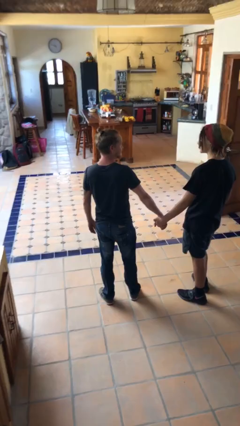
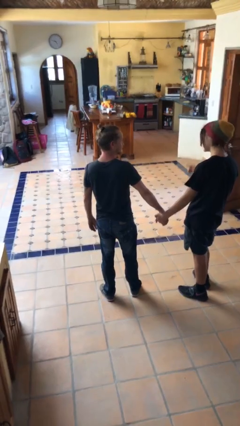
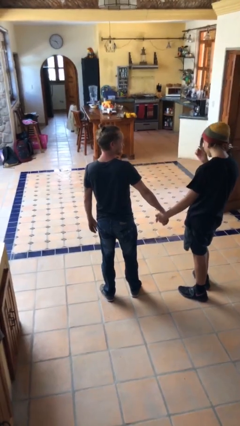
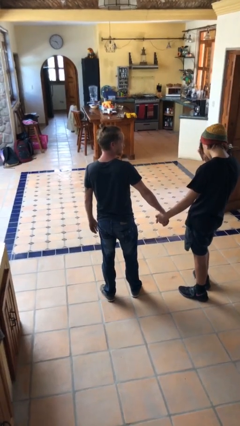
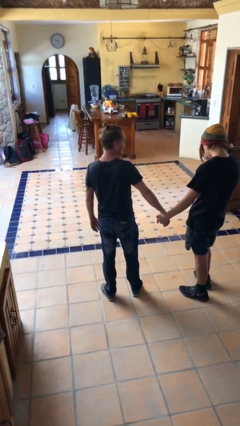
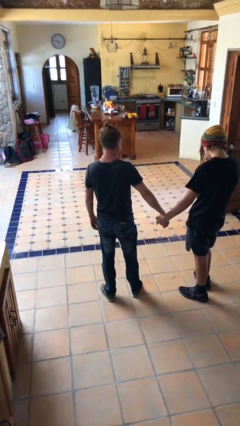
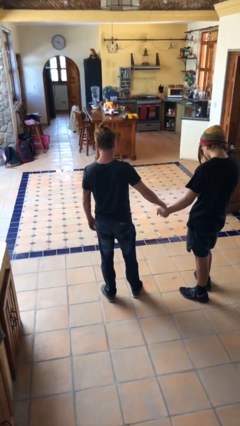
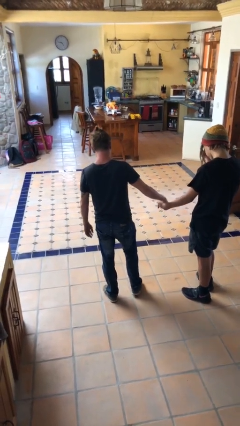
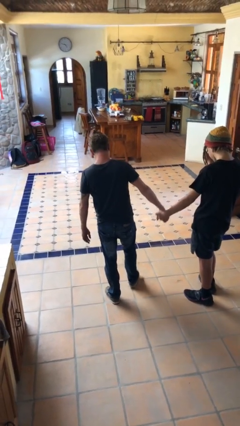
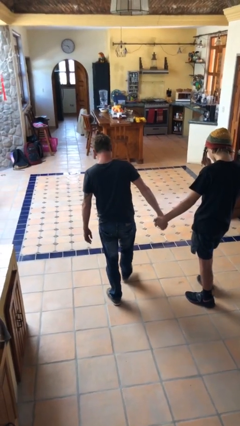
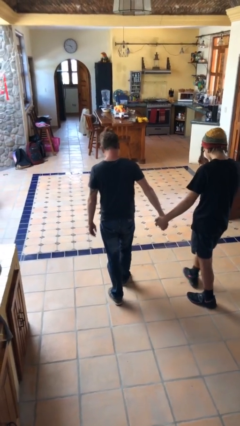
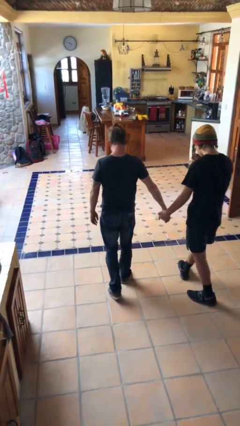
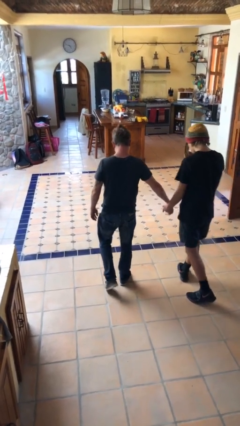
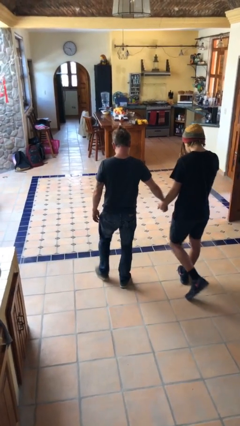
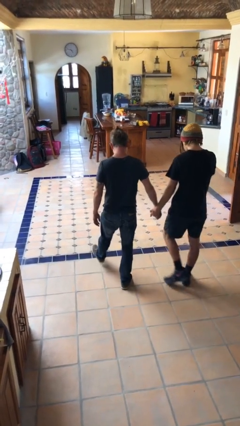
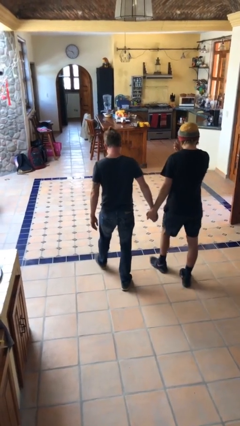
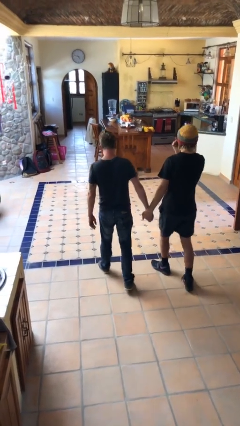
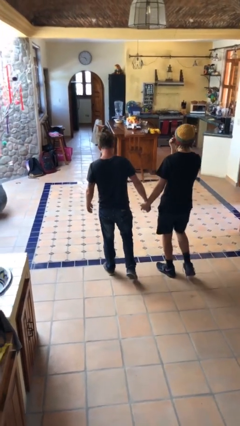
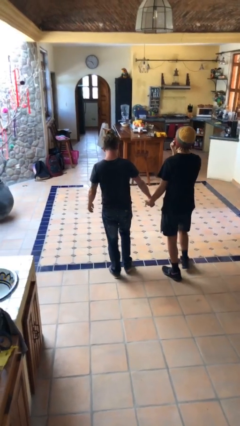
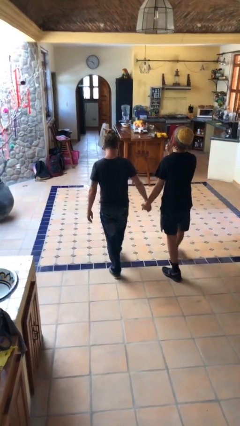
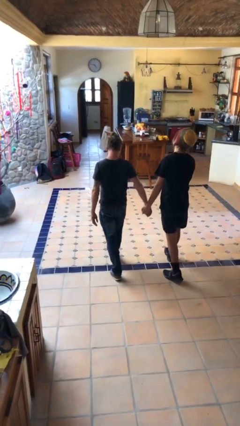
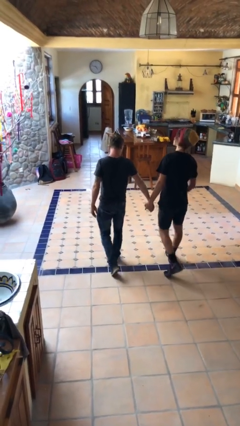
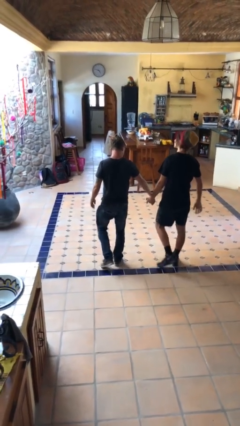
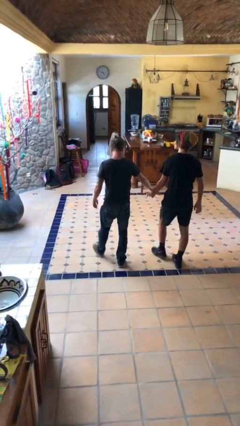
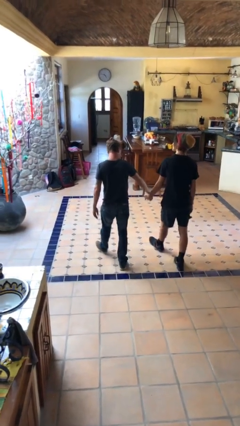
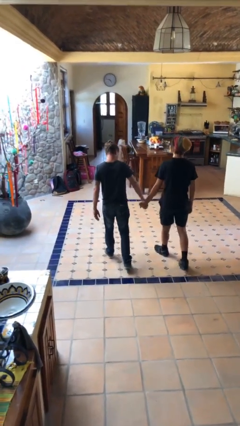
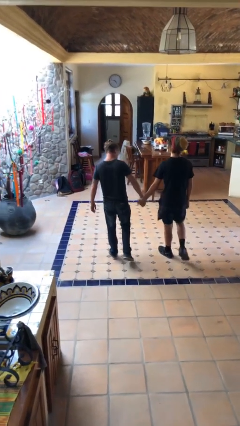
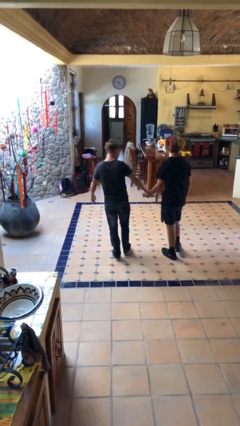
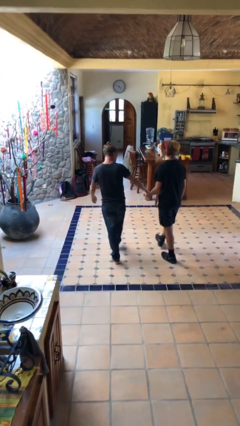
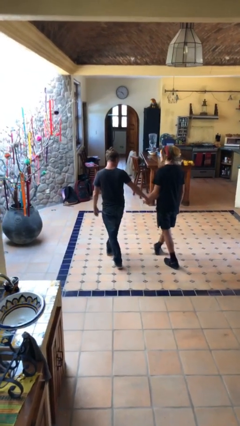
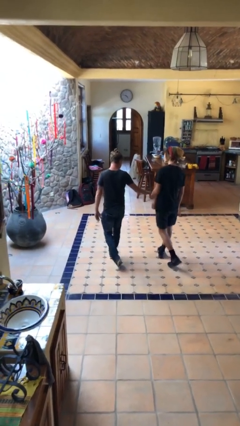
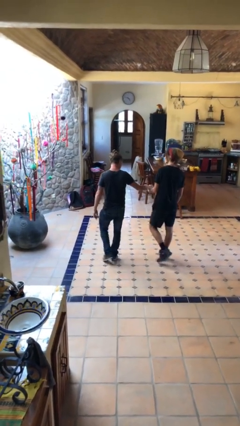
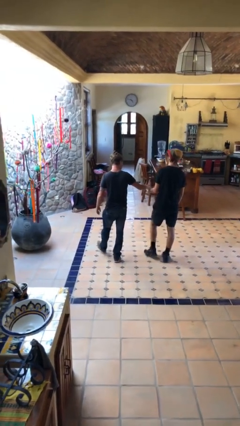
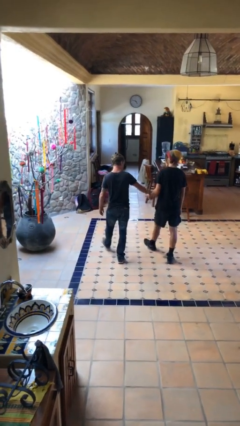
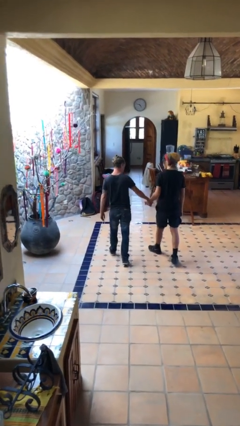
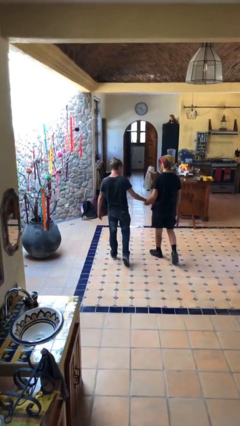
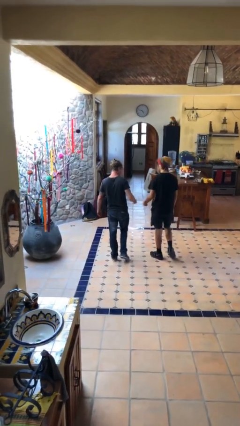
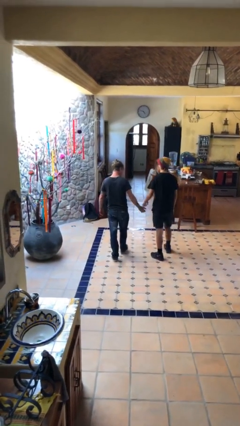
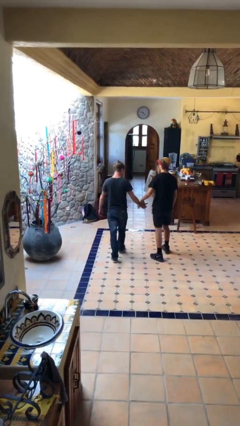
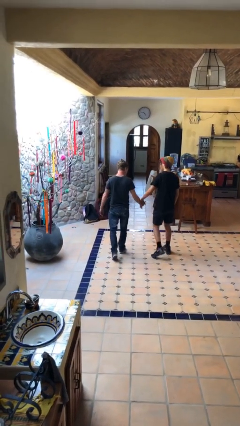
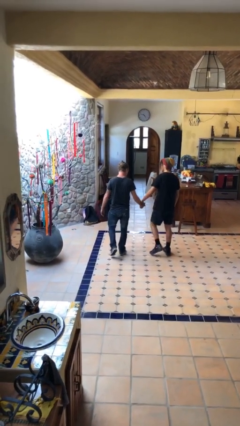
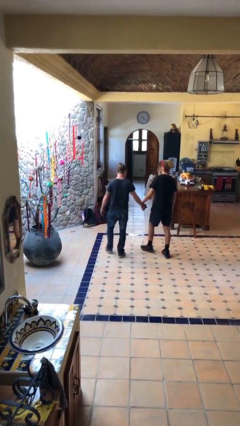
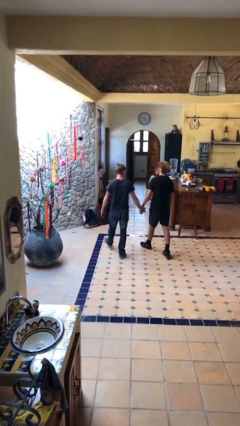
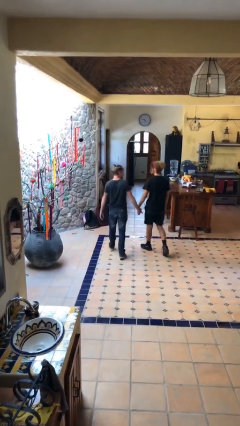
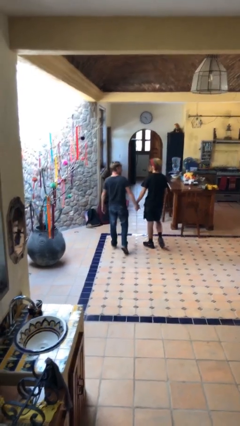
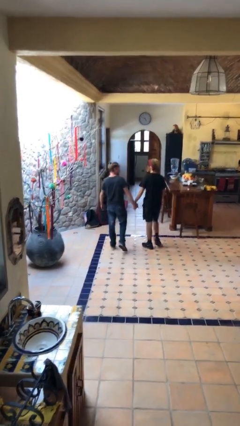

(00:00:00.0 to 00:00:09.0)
person holds hand

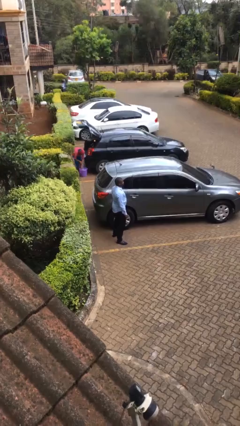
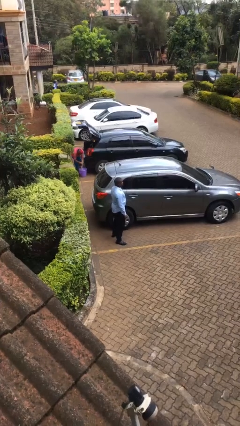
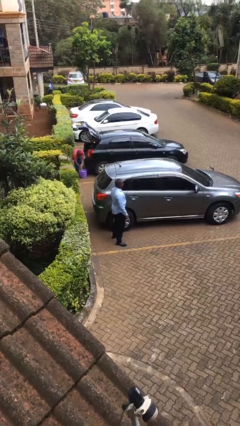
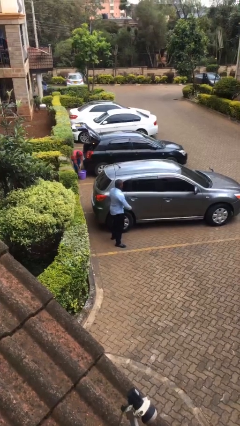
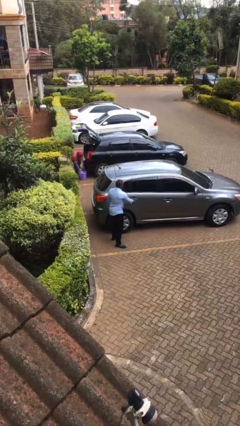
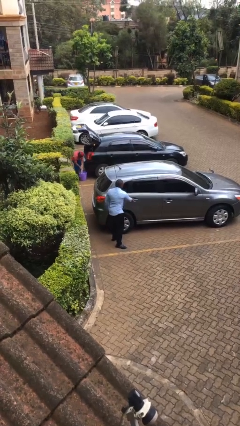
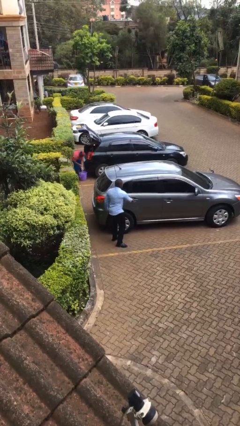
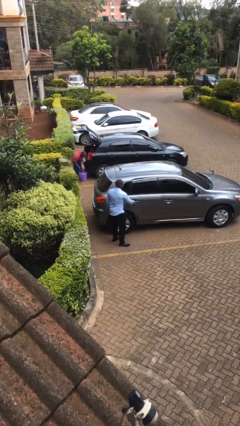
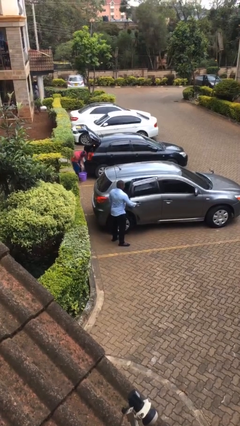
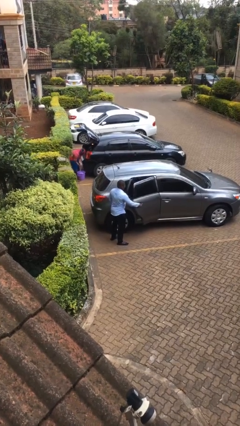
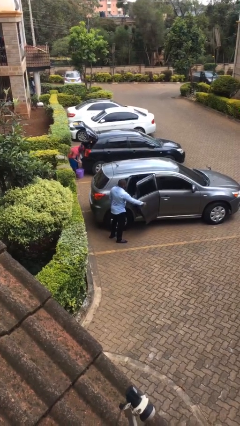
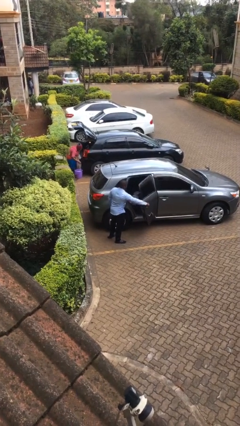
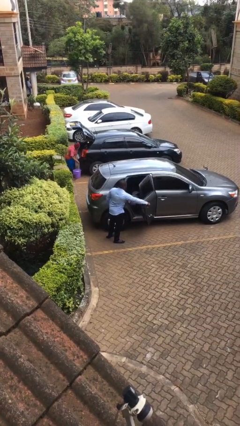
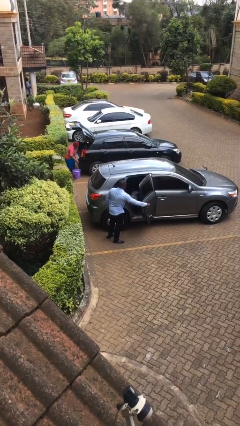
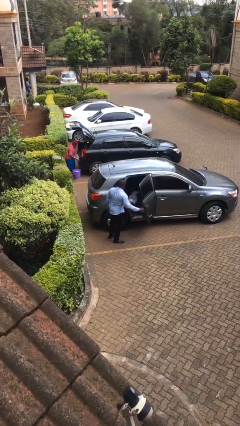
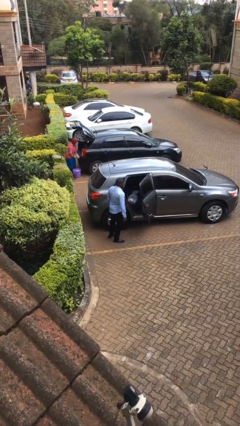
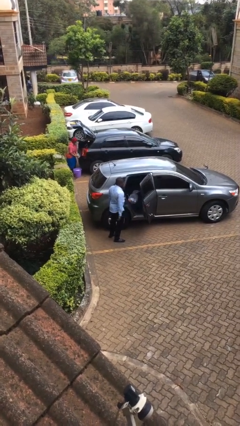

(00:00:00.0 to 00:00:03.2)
person opens car door

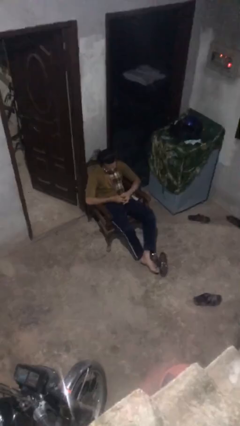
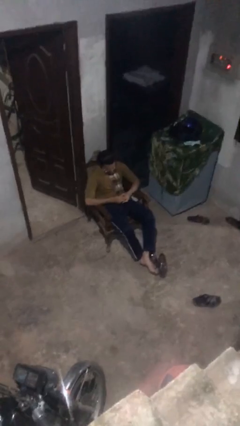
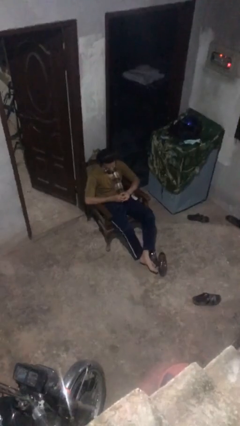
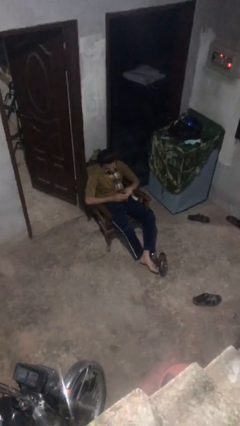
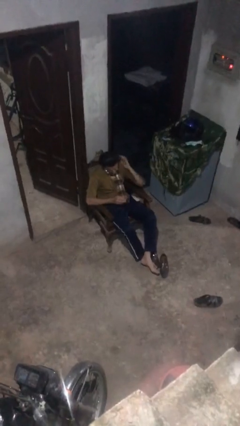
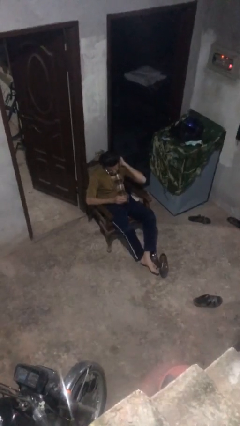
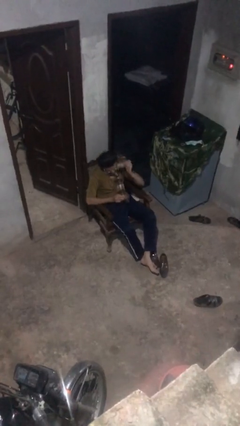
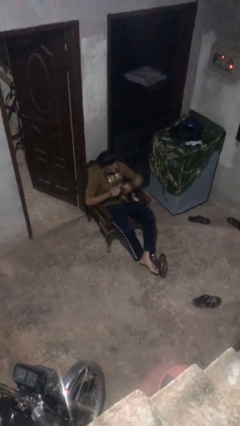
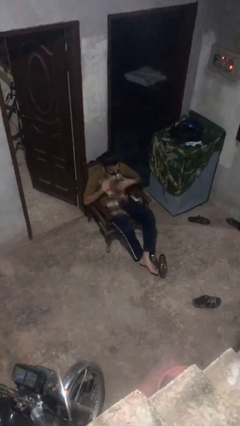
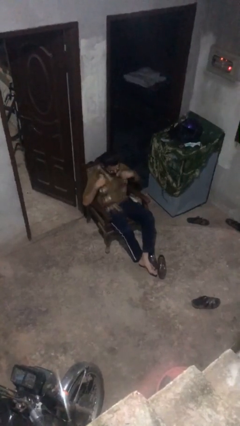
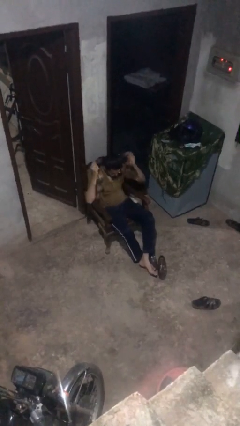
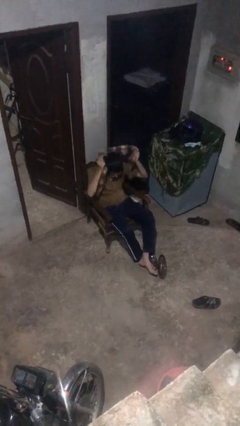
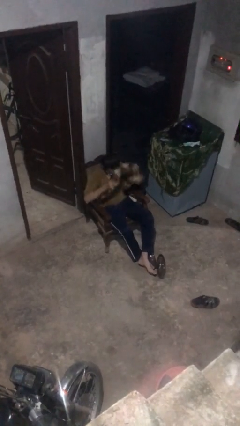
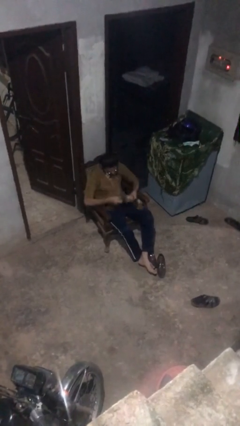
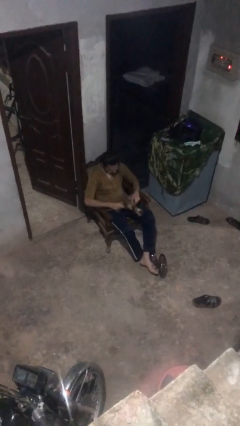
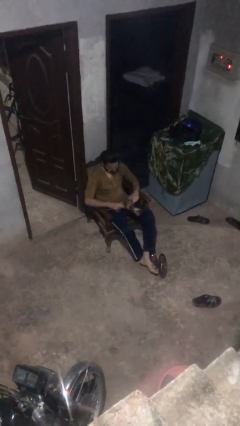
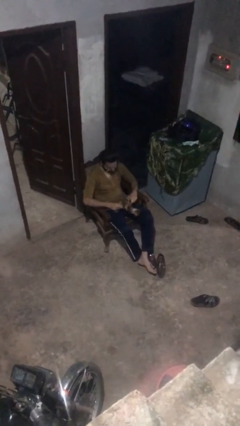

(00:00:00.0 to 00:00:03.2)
person takes off scarf

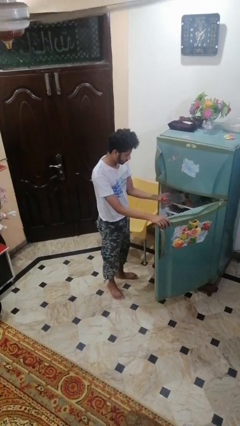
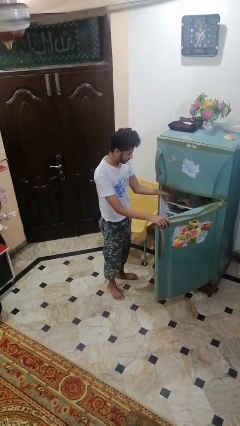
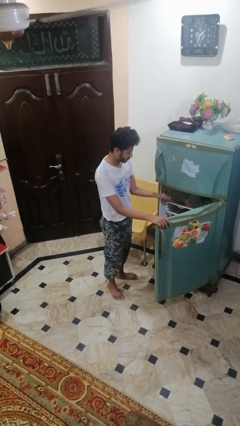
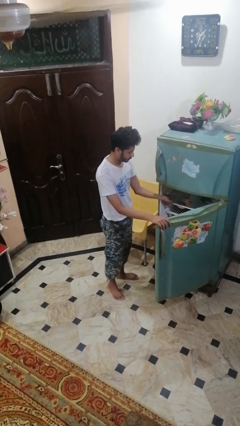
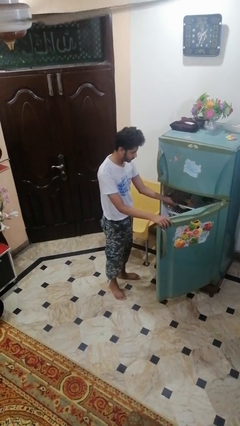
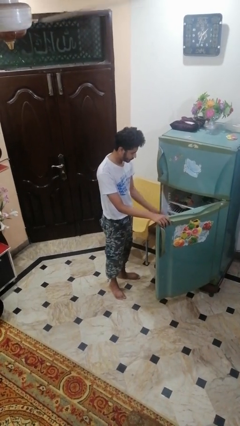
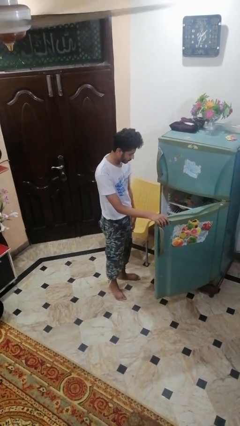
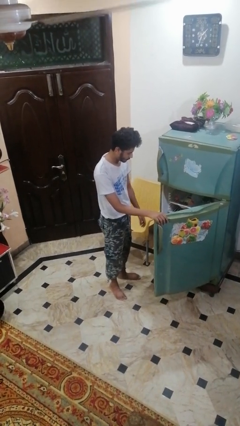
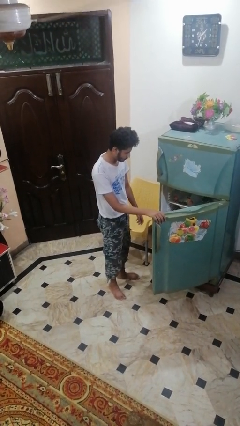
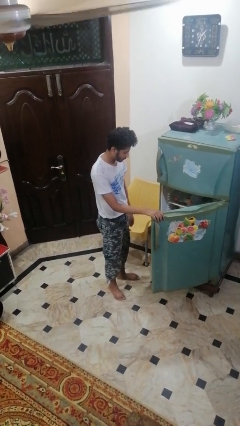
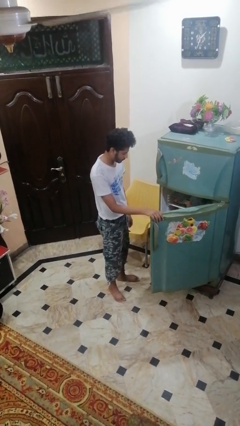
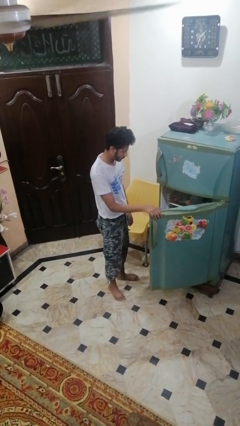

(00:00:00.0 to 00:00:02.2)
person puts object into refrigerator
